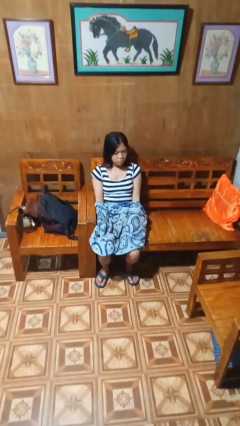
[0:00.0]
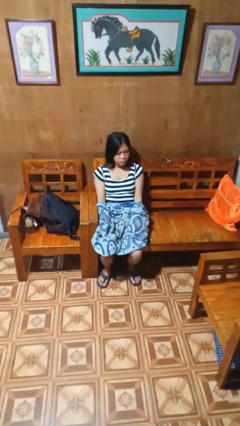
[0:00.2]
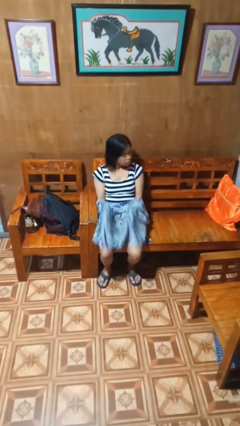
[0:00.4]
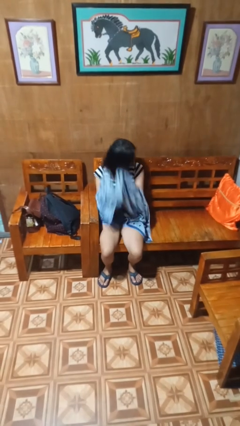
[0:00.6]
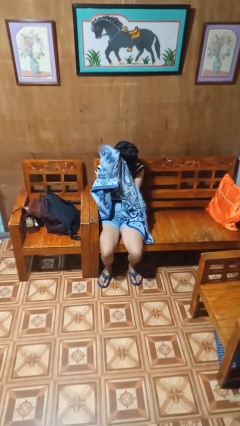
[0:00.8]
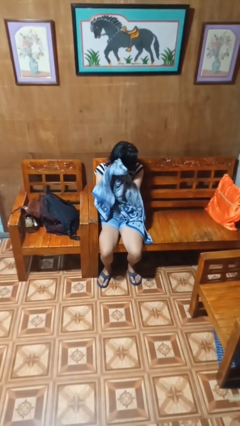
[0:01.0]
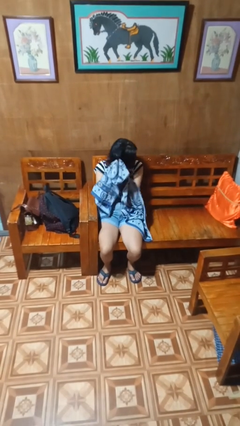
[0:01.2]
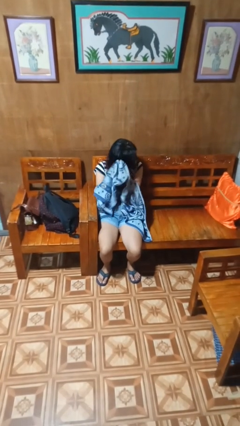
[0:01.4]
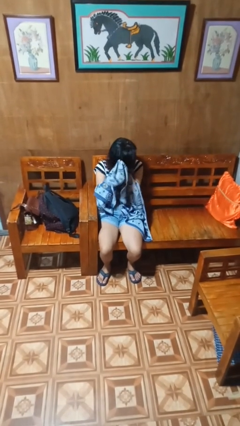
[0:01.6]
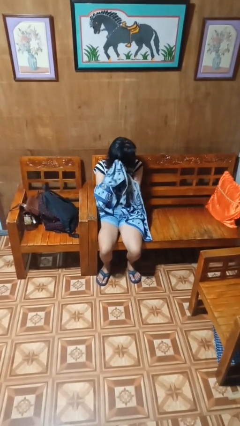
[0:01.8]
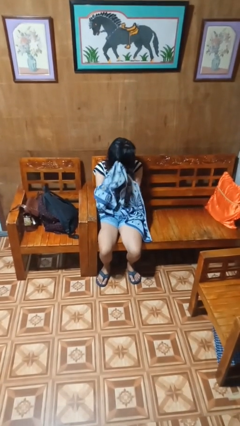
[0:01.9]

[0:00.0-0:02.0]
person dries hair with towel

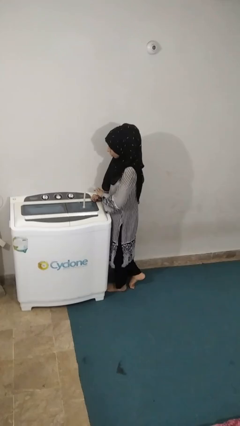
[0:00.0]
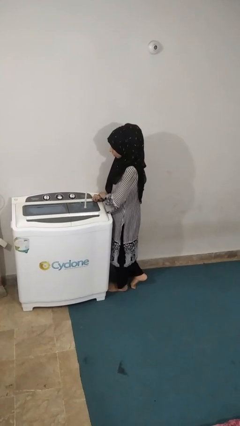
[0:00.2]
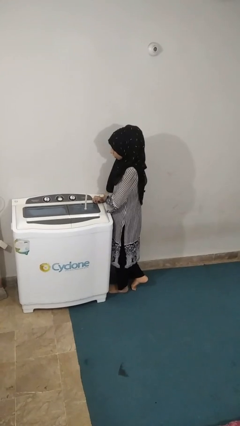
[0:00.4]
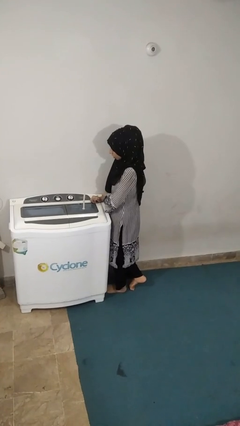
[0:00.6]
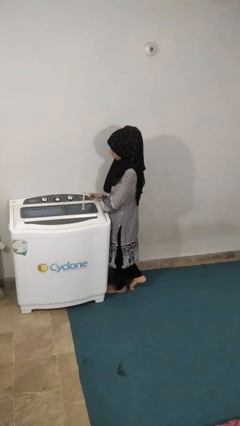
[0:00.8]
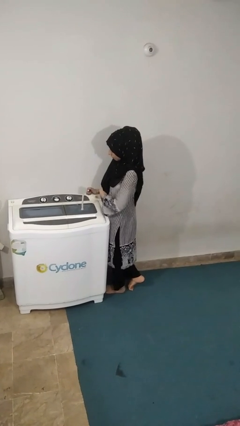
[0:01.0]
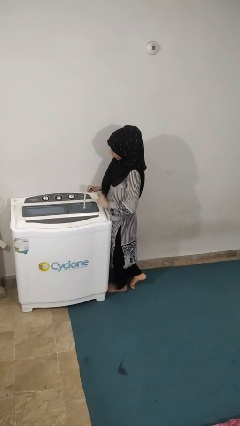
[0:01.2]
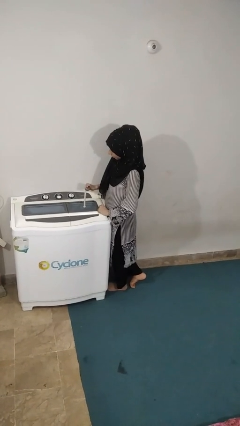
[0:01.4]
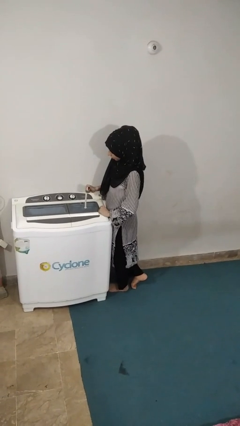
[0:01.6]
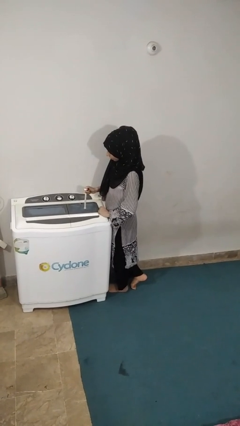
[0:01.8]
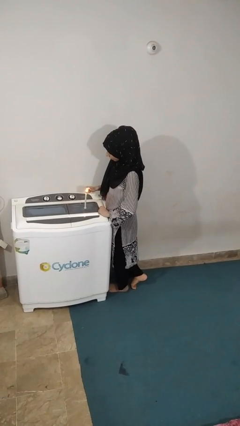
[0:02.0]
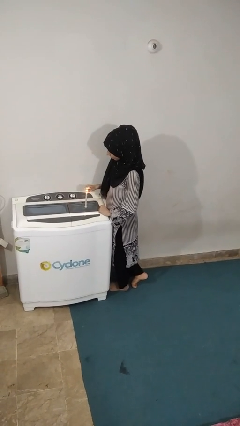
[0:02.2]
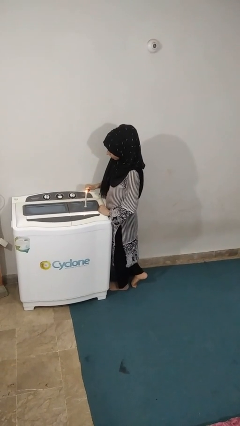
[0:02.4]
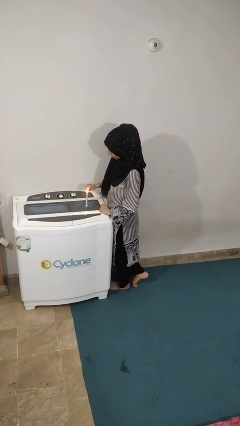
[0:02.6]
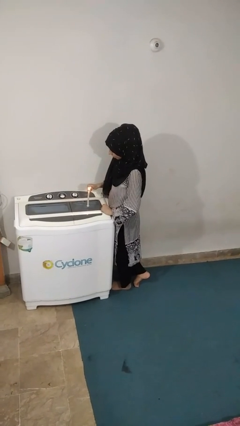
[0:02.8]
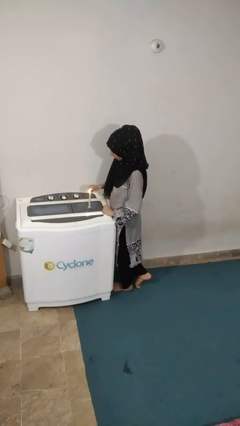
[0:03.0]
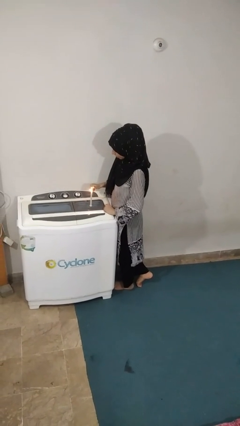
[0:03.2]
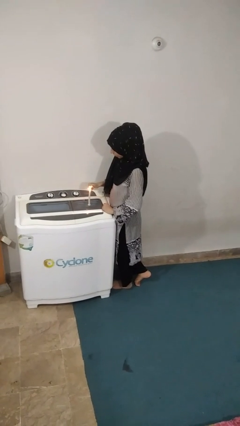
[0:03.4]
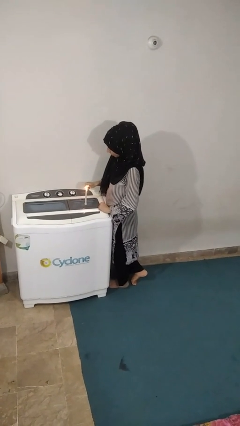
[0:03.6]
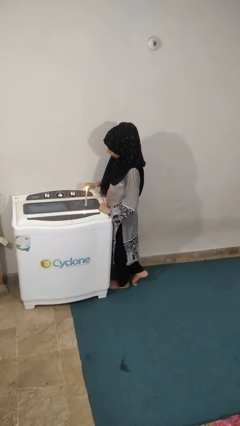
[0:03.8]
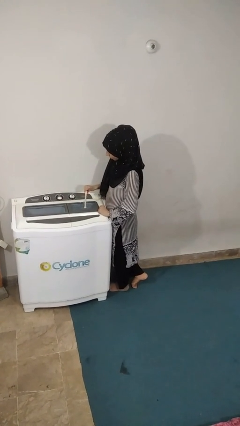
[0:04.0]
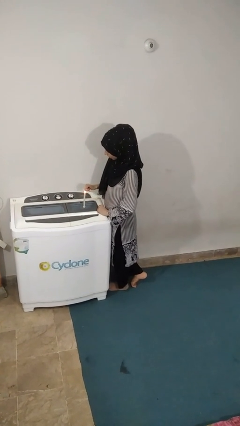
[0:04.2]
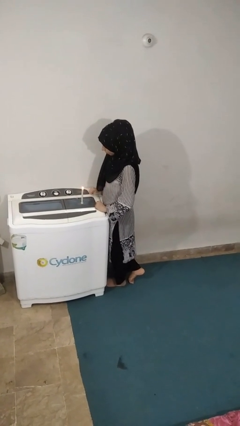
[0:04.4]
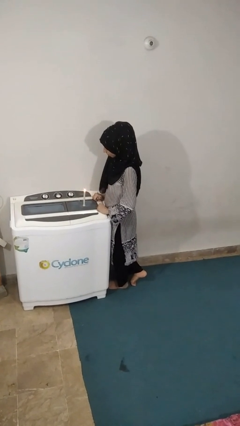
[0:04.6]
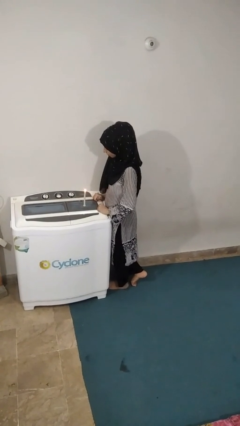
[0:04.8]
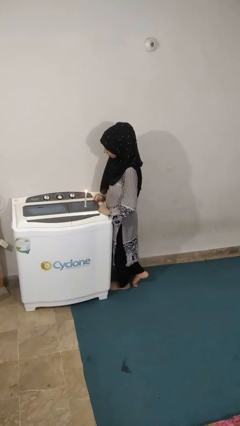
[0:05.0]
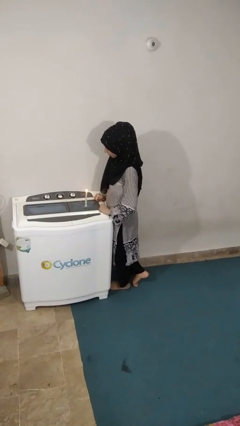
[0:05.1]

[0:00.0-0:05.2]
person lights candle

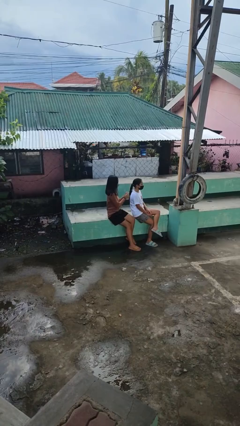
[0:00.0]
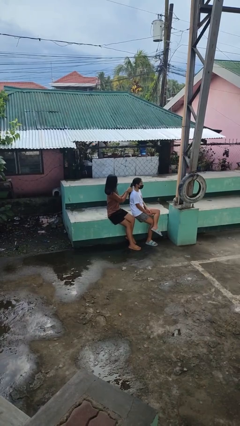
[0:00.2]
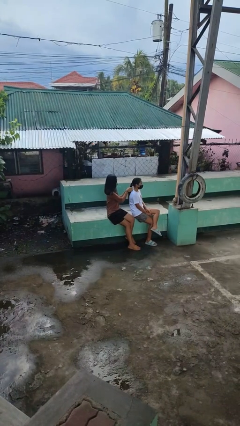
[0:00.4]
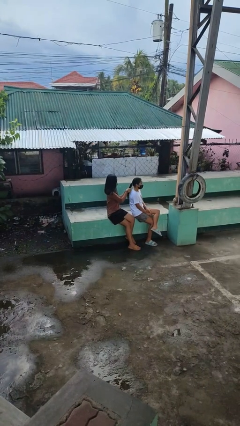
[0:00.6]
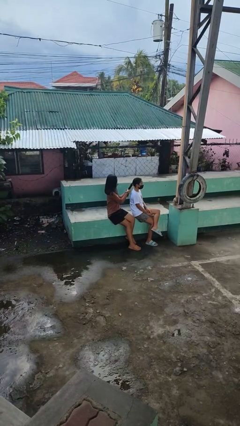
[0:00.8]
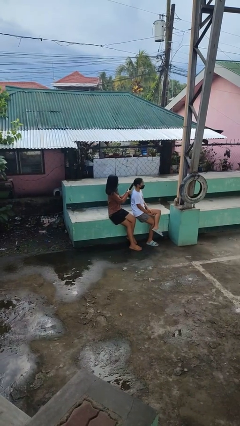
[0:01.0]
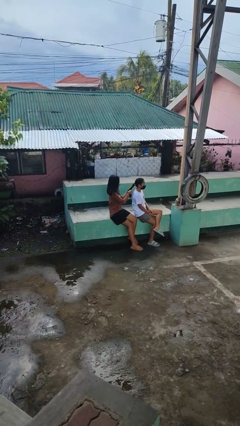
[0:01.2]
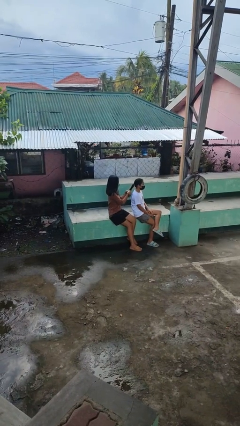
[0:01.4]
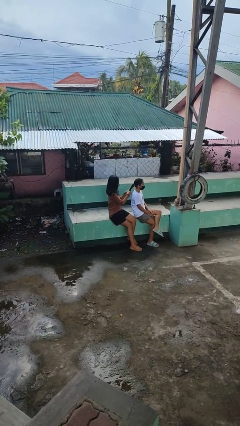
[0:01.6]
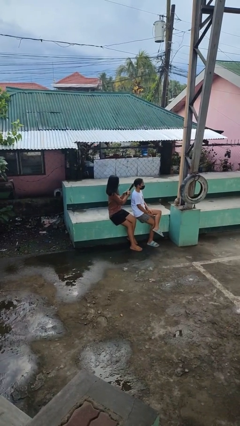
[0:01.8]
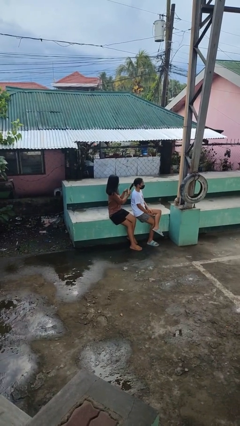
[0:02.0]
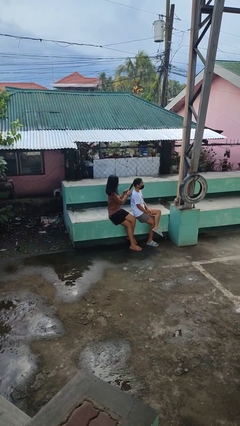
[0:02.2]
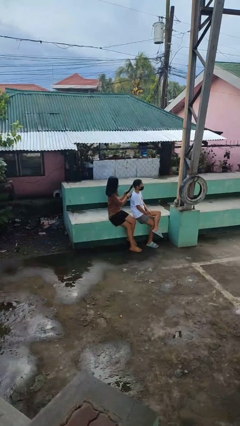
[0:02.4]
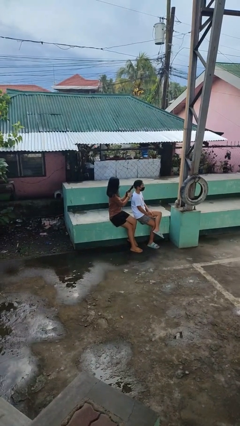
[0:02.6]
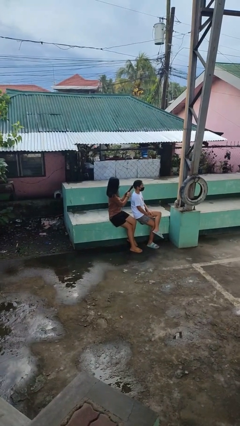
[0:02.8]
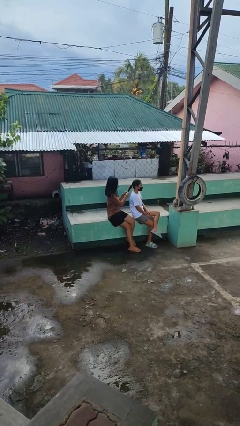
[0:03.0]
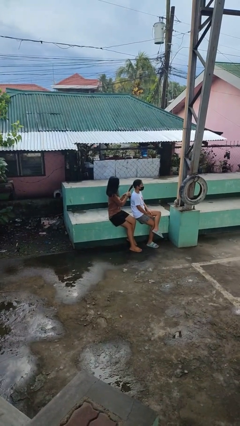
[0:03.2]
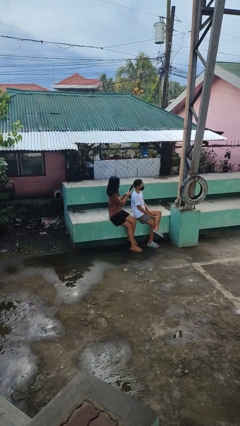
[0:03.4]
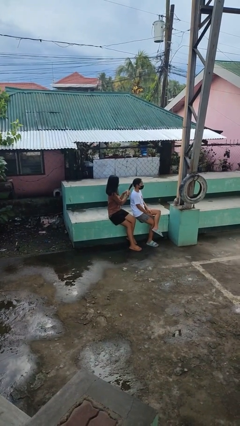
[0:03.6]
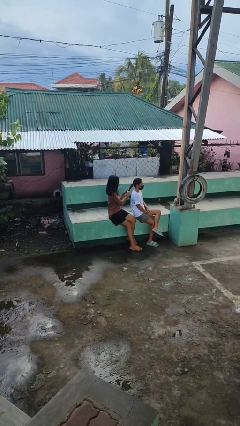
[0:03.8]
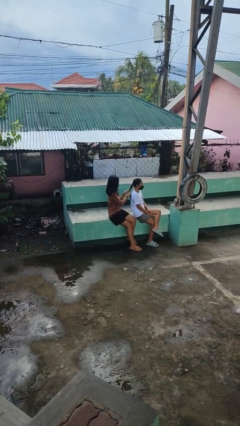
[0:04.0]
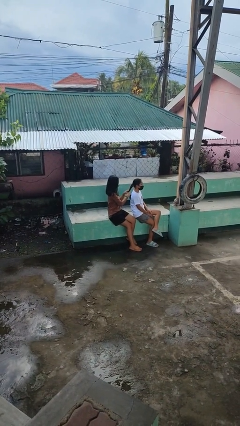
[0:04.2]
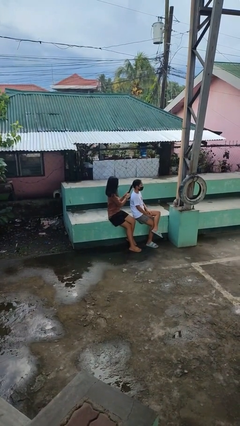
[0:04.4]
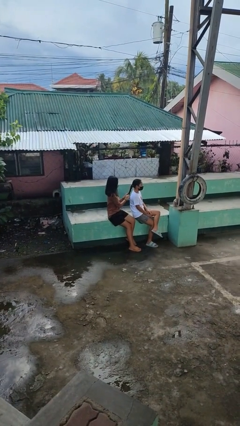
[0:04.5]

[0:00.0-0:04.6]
person braids hair of person

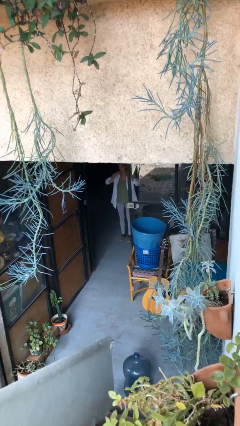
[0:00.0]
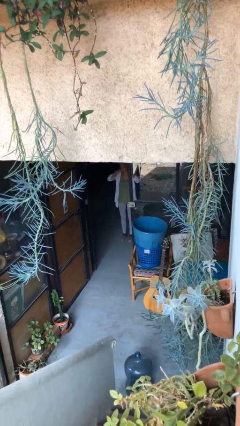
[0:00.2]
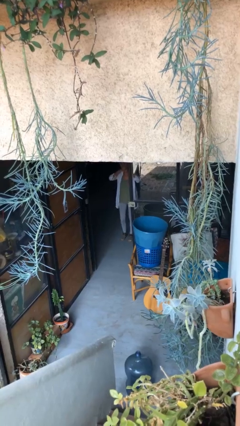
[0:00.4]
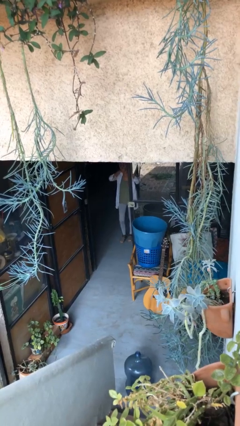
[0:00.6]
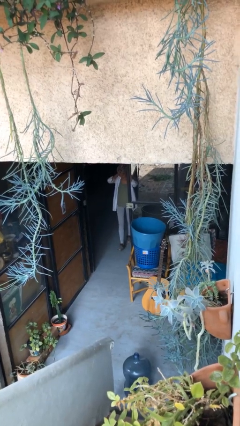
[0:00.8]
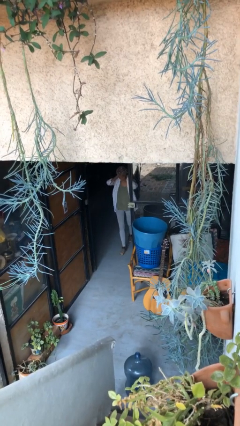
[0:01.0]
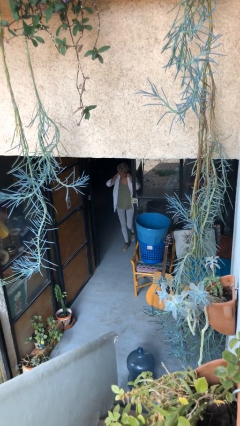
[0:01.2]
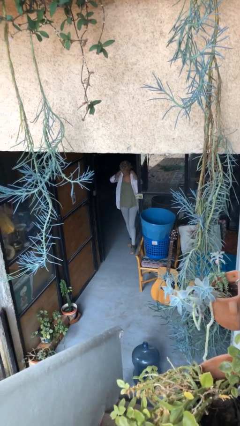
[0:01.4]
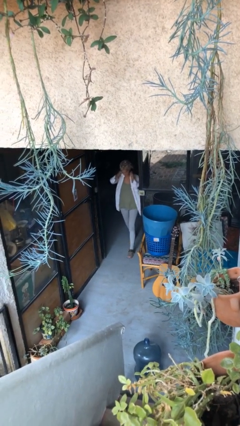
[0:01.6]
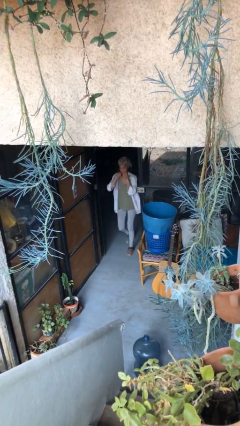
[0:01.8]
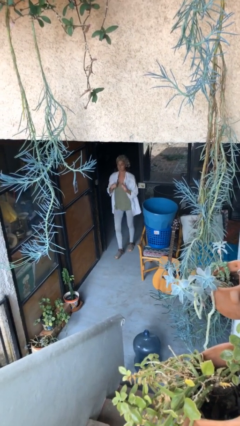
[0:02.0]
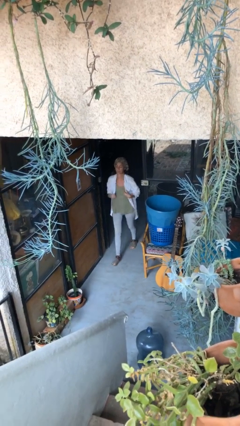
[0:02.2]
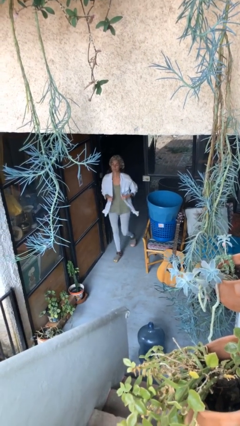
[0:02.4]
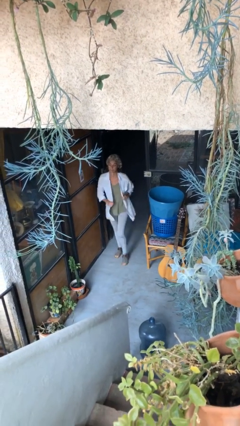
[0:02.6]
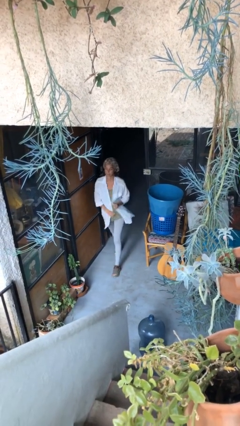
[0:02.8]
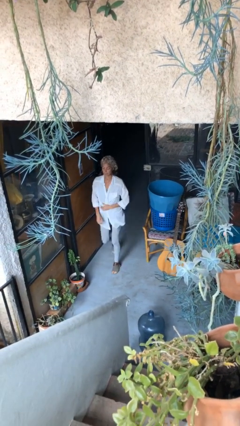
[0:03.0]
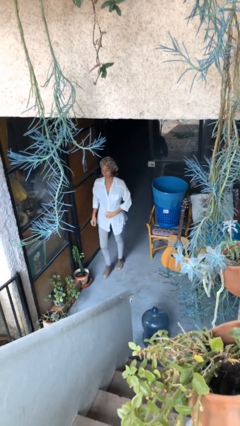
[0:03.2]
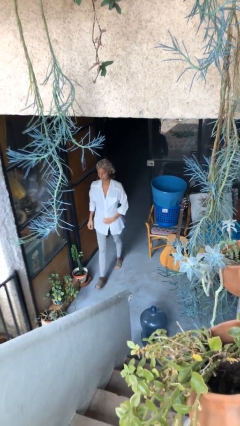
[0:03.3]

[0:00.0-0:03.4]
person enters scene through structure

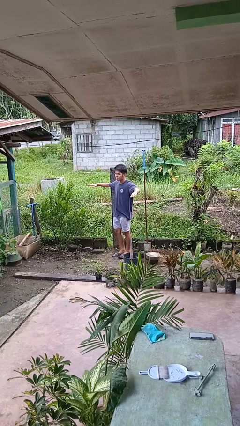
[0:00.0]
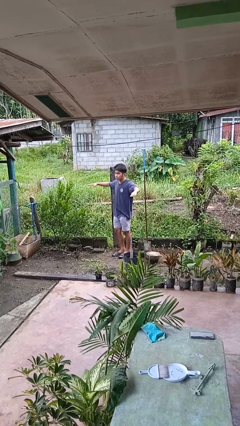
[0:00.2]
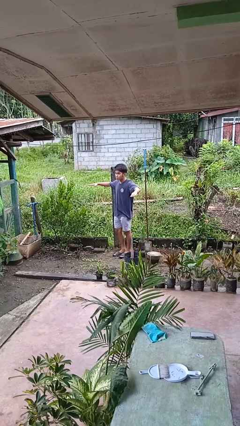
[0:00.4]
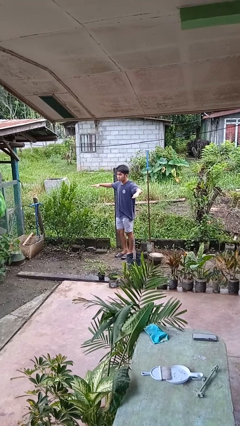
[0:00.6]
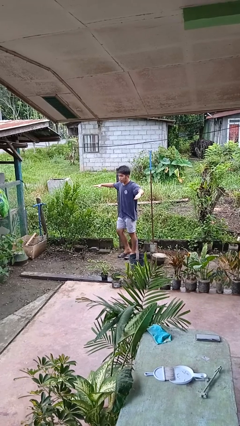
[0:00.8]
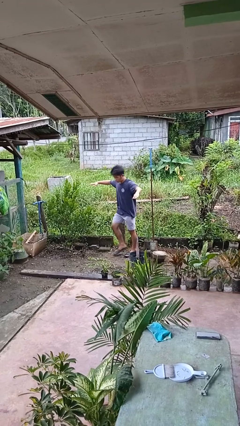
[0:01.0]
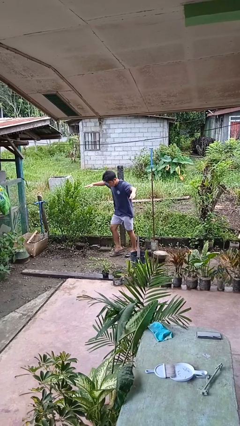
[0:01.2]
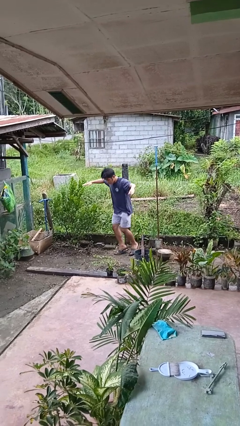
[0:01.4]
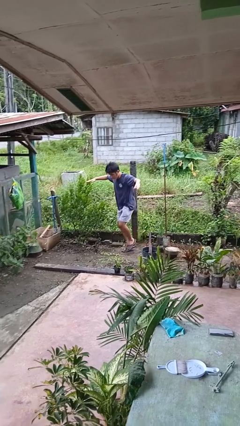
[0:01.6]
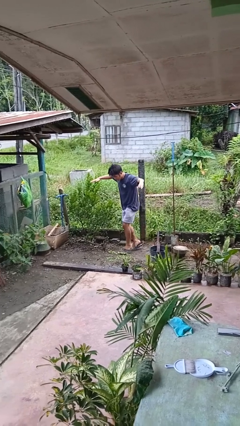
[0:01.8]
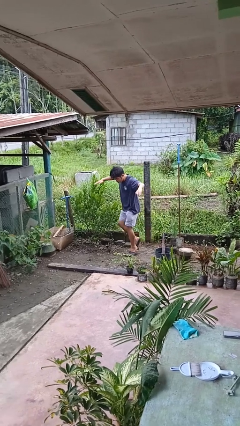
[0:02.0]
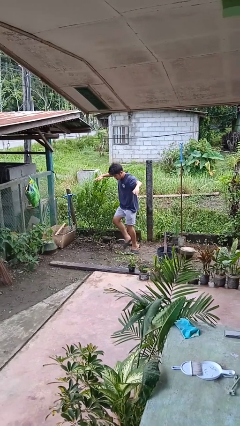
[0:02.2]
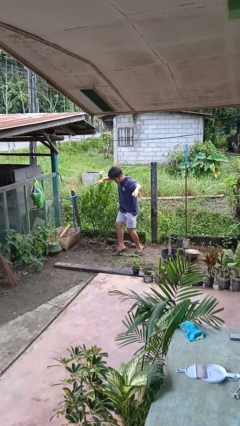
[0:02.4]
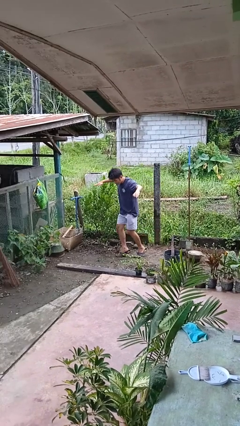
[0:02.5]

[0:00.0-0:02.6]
person walks tiptoe
